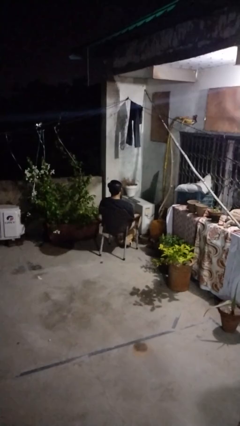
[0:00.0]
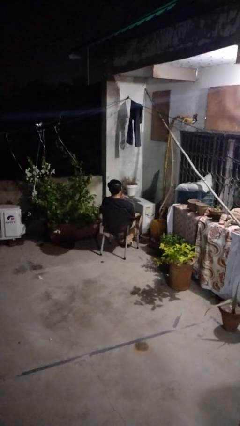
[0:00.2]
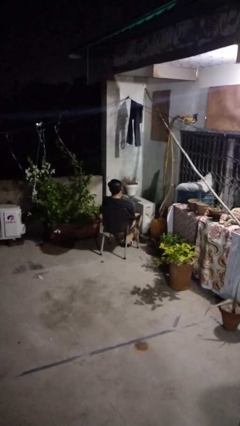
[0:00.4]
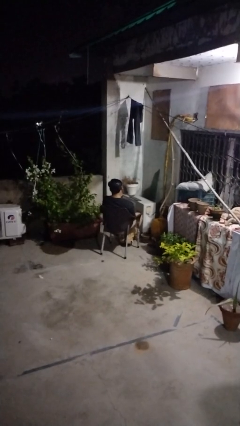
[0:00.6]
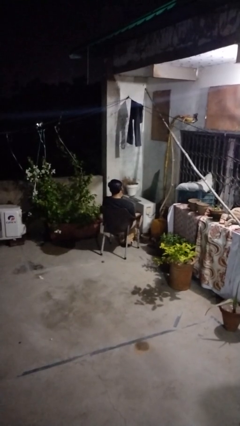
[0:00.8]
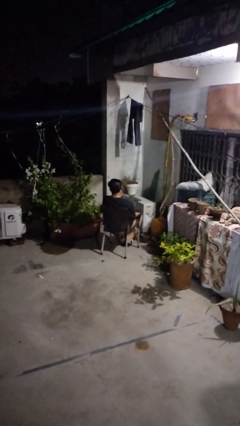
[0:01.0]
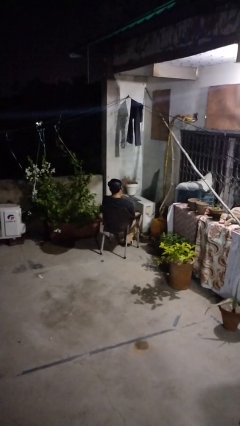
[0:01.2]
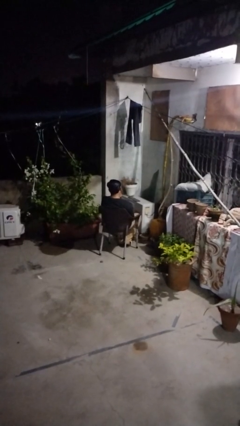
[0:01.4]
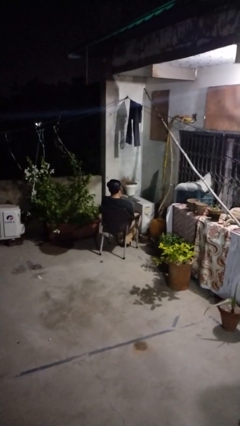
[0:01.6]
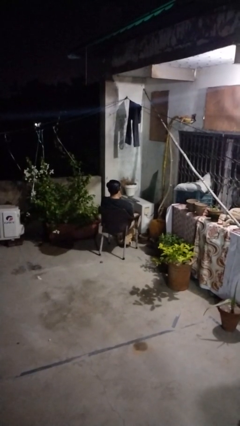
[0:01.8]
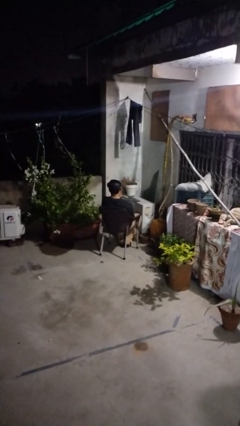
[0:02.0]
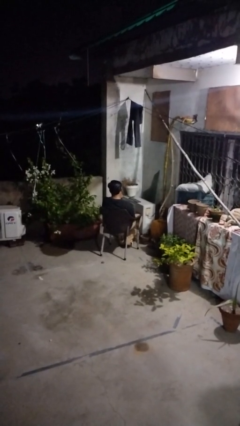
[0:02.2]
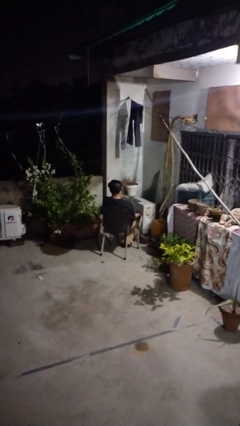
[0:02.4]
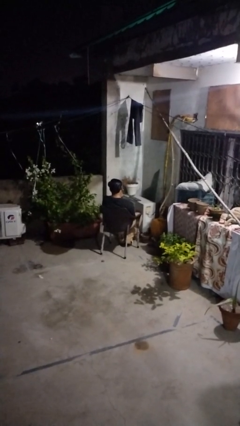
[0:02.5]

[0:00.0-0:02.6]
person strokes chin

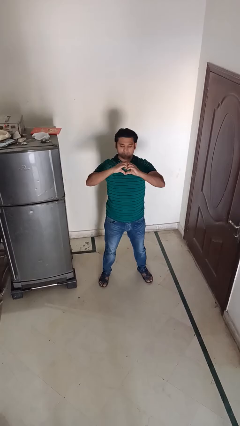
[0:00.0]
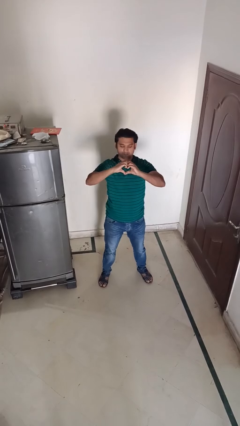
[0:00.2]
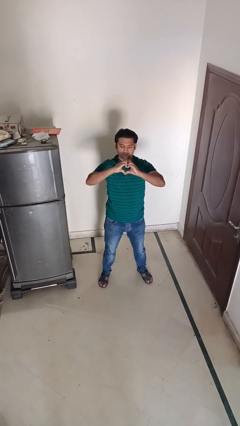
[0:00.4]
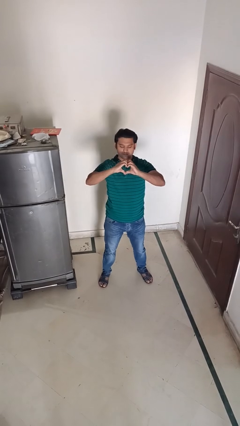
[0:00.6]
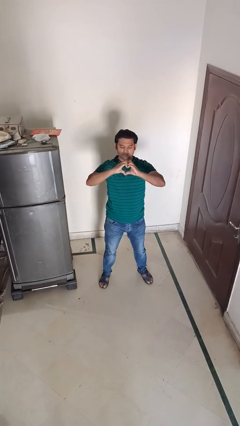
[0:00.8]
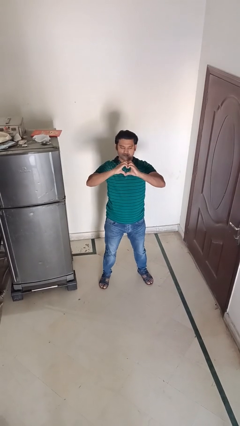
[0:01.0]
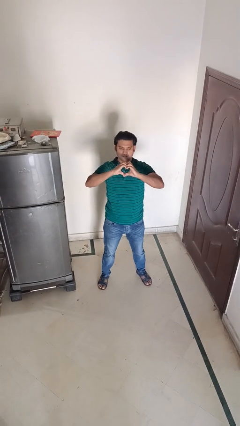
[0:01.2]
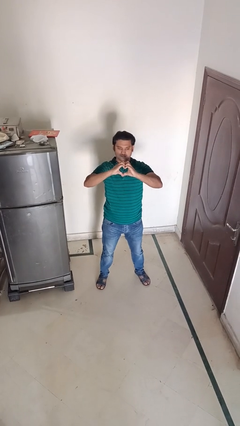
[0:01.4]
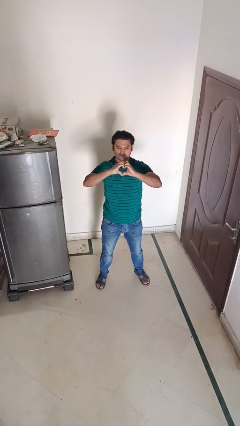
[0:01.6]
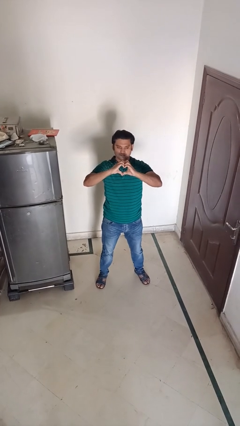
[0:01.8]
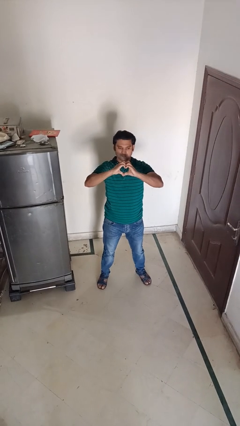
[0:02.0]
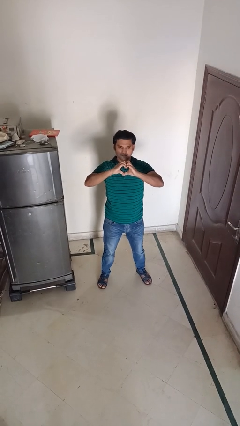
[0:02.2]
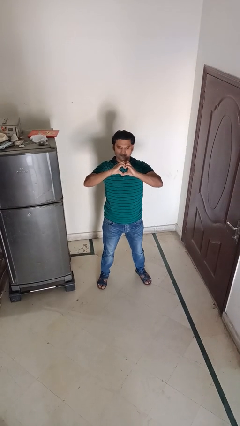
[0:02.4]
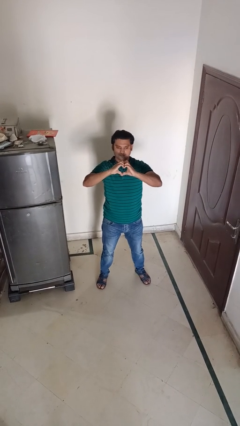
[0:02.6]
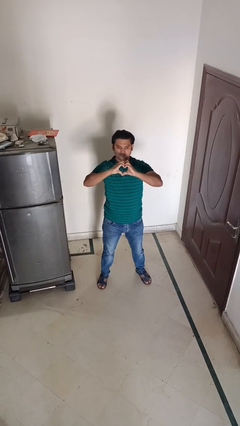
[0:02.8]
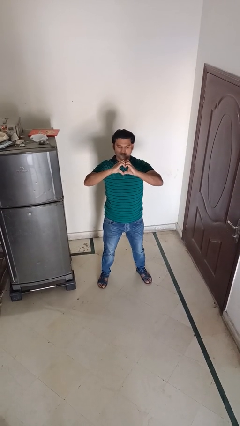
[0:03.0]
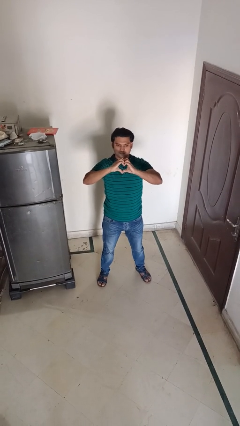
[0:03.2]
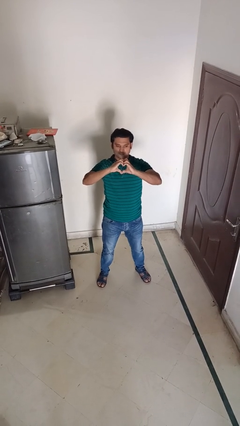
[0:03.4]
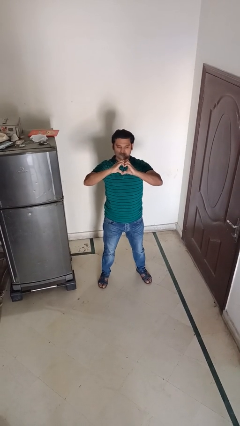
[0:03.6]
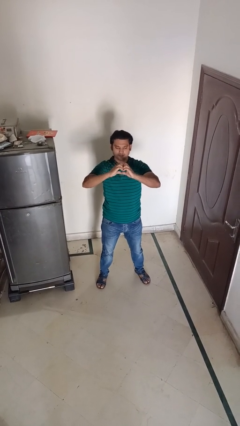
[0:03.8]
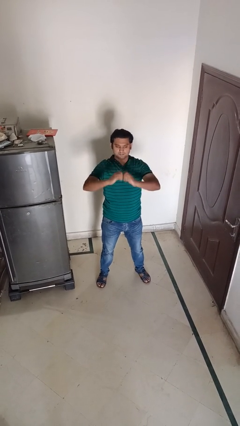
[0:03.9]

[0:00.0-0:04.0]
person gestures heart

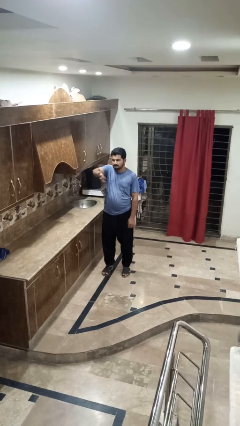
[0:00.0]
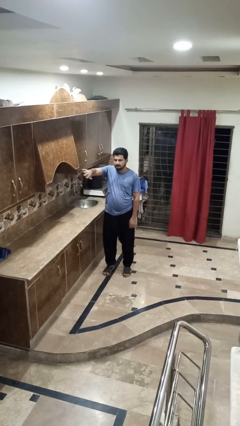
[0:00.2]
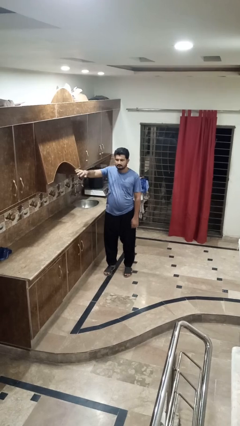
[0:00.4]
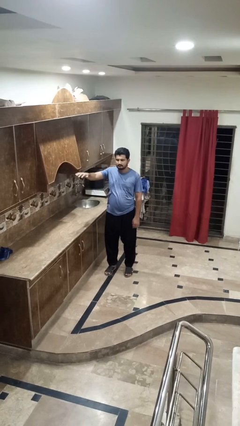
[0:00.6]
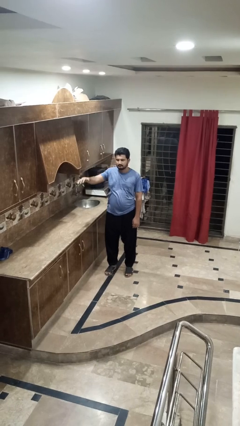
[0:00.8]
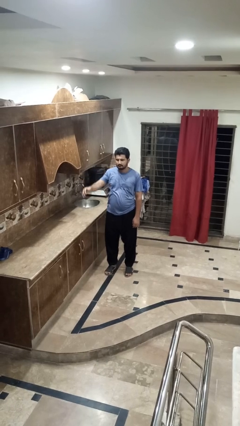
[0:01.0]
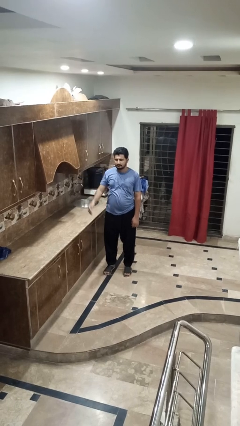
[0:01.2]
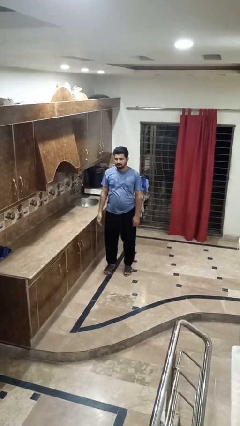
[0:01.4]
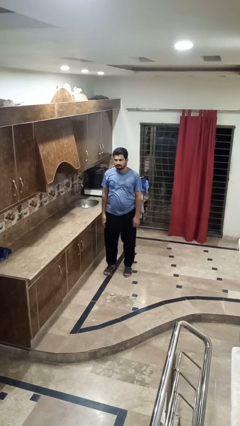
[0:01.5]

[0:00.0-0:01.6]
person gestures swipe right

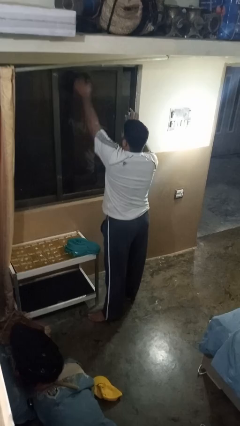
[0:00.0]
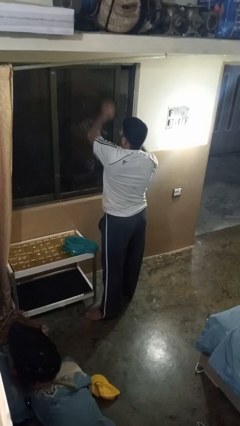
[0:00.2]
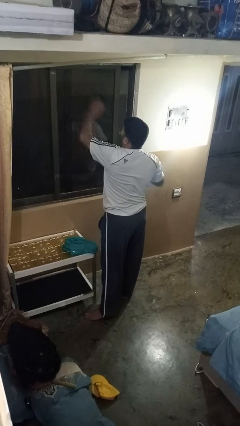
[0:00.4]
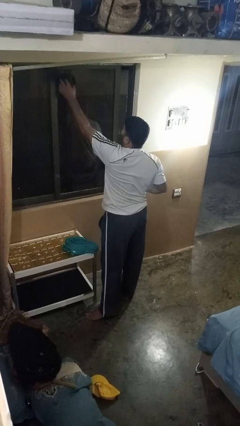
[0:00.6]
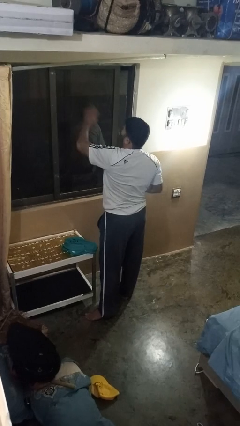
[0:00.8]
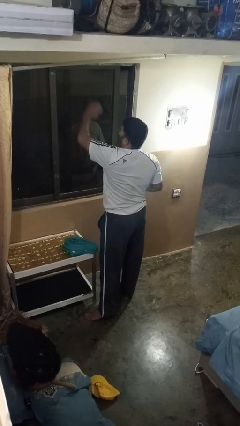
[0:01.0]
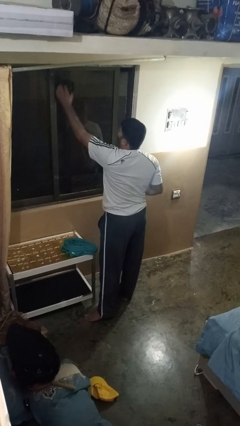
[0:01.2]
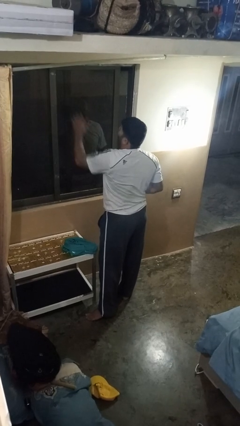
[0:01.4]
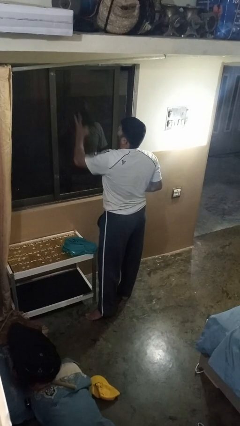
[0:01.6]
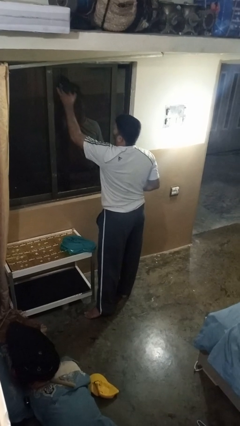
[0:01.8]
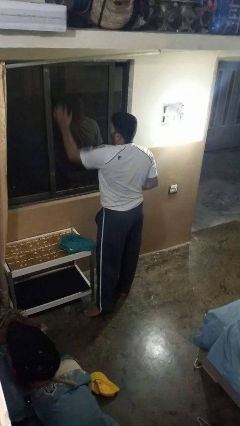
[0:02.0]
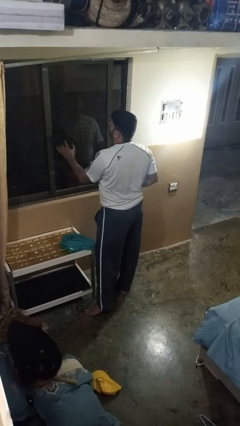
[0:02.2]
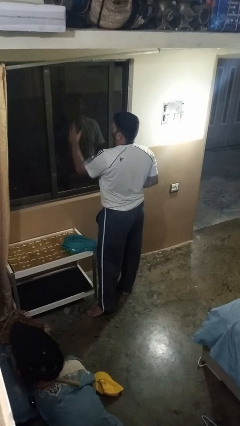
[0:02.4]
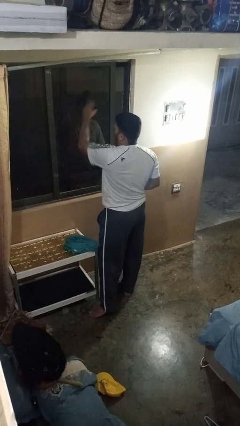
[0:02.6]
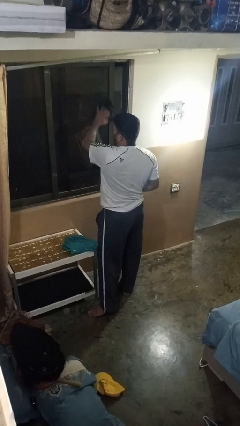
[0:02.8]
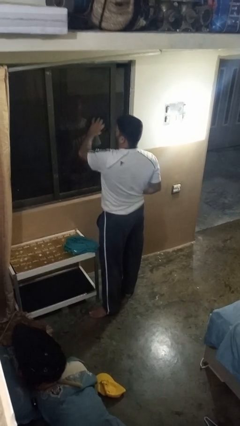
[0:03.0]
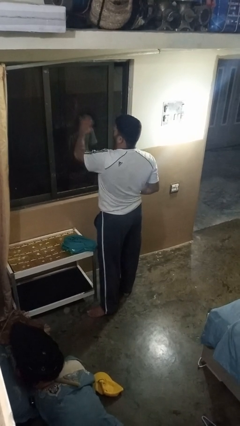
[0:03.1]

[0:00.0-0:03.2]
person washes window

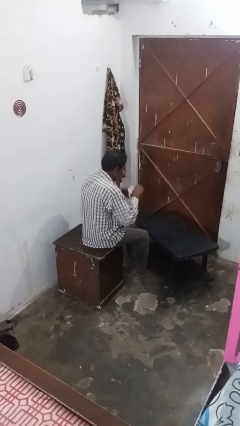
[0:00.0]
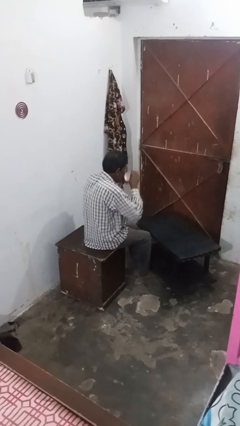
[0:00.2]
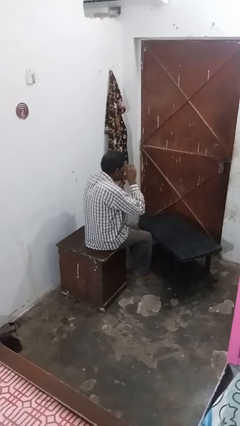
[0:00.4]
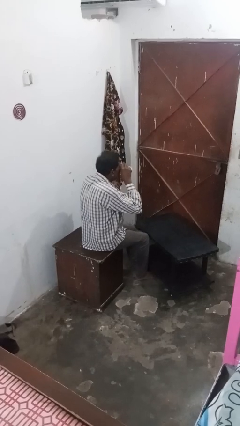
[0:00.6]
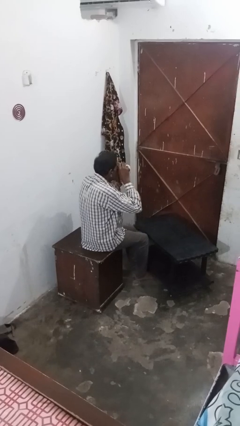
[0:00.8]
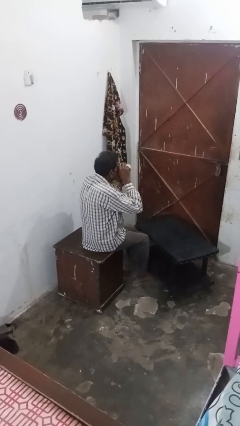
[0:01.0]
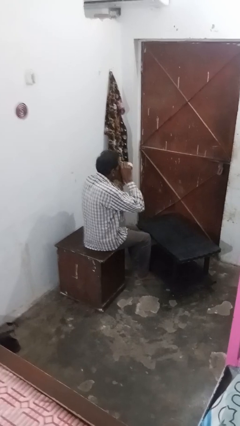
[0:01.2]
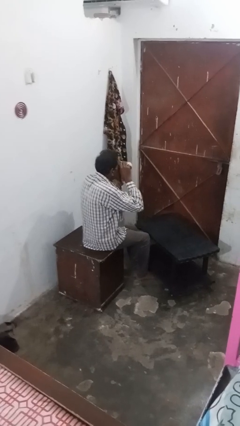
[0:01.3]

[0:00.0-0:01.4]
person drinks from mug

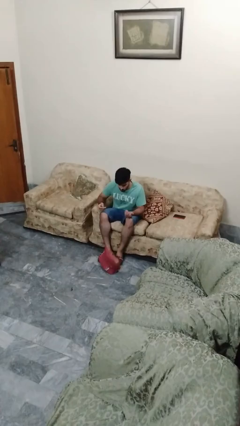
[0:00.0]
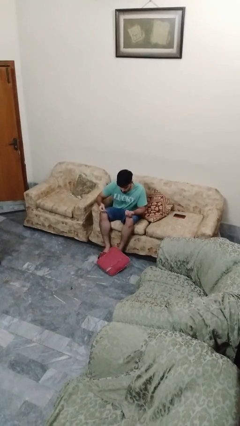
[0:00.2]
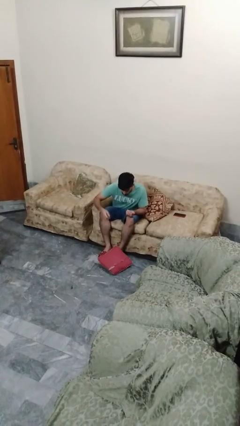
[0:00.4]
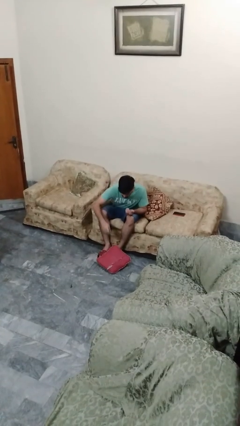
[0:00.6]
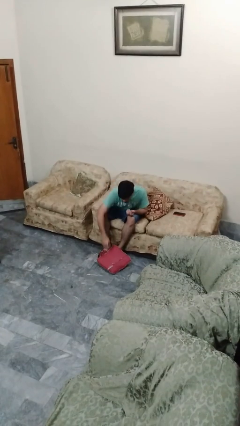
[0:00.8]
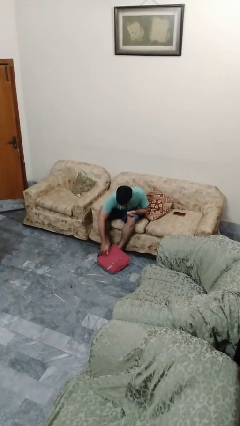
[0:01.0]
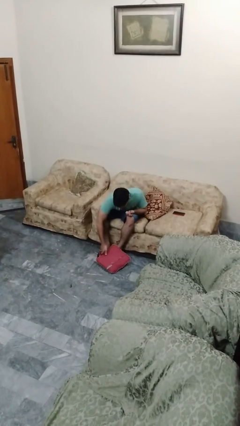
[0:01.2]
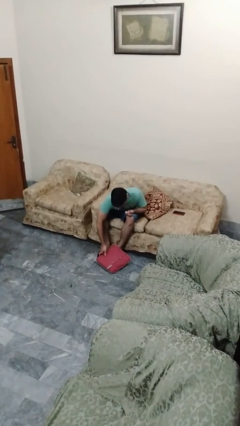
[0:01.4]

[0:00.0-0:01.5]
person drops object

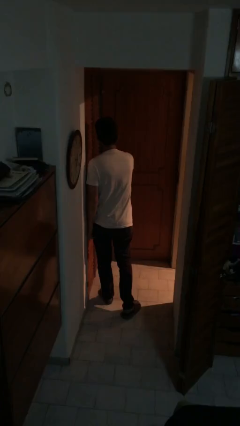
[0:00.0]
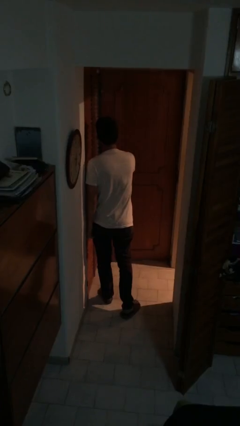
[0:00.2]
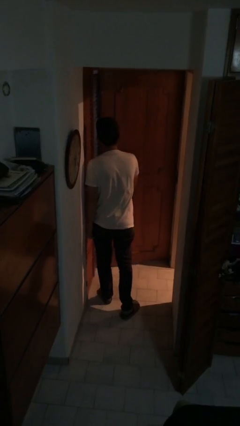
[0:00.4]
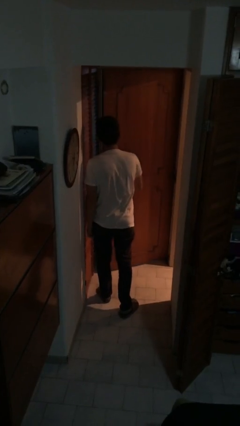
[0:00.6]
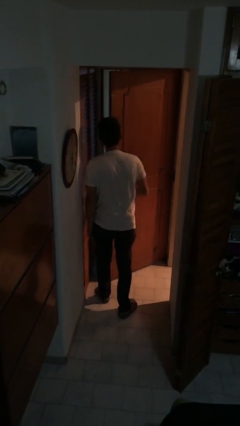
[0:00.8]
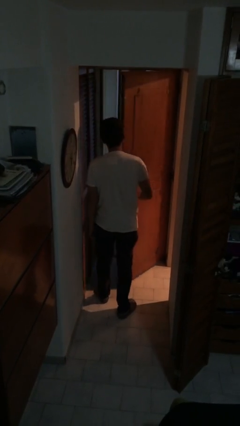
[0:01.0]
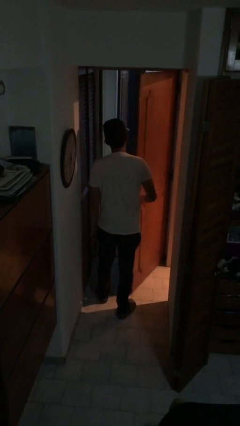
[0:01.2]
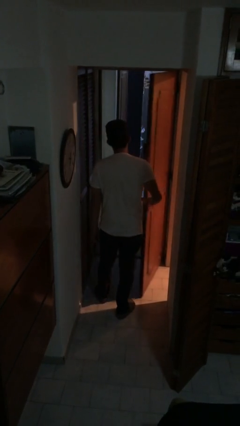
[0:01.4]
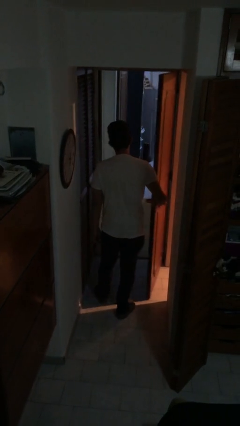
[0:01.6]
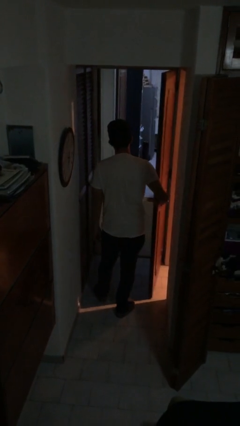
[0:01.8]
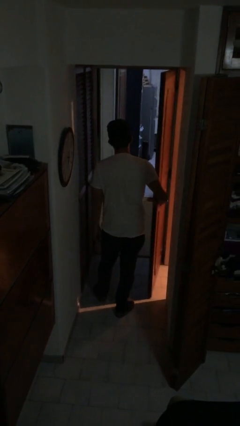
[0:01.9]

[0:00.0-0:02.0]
person opens facility door

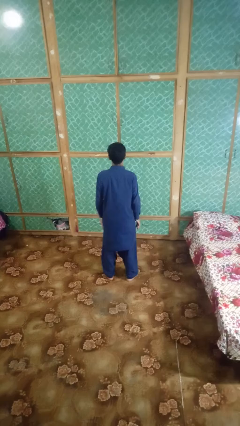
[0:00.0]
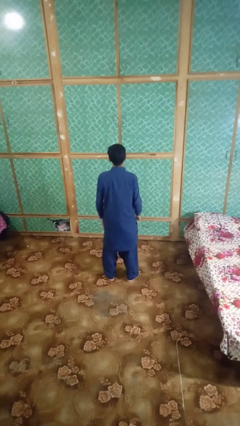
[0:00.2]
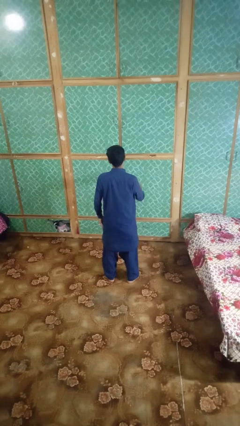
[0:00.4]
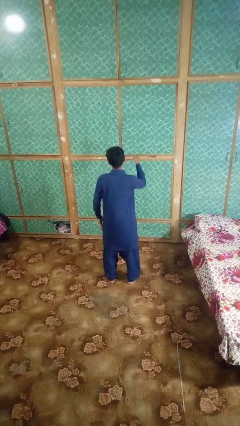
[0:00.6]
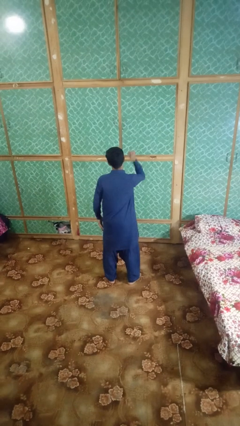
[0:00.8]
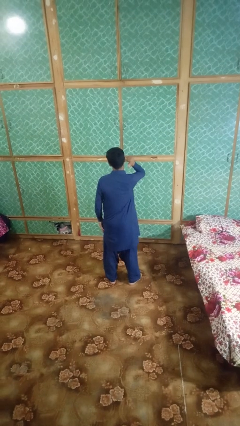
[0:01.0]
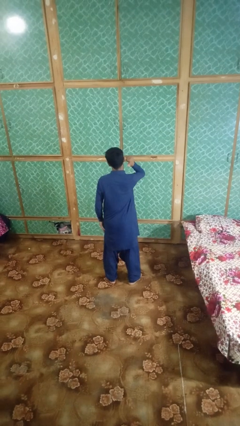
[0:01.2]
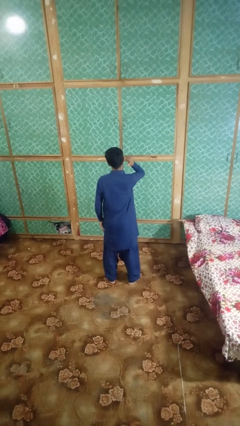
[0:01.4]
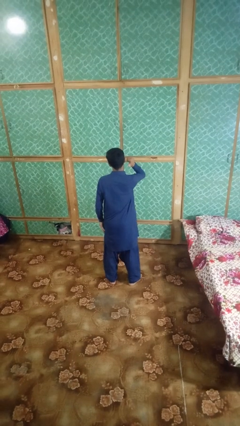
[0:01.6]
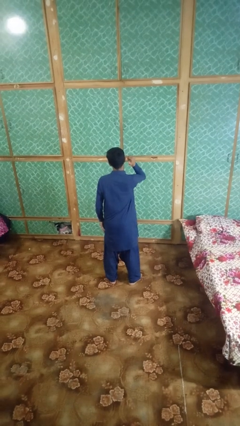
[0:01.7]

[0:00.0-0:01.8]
person gestures behind me
